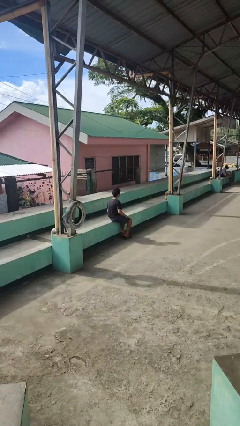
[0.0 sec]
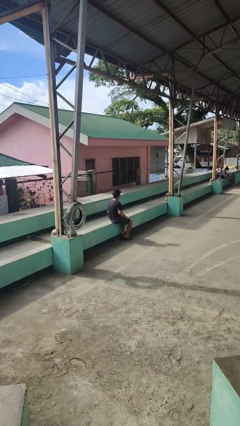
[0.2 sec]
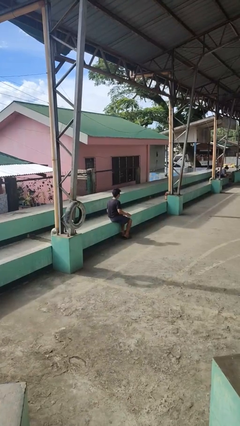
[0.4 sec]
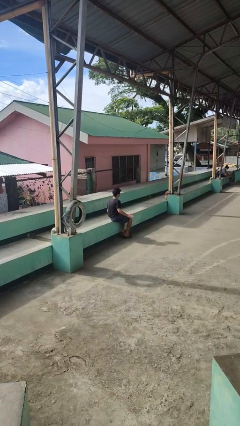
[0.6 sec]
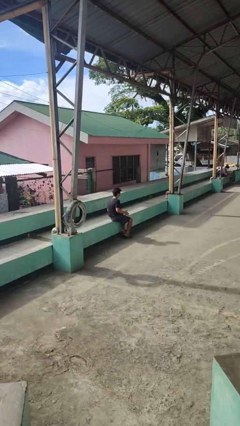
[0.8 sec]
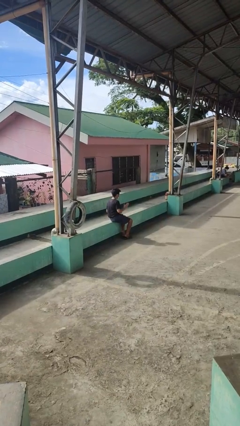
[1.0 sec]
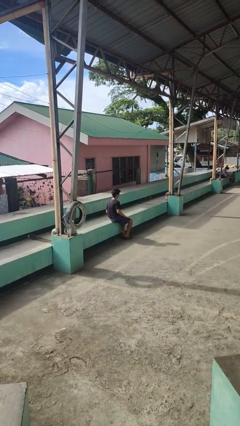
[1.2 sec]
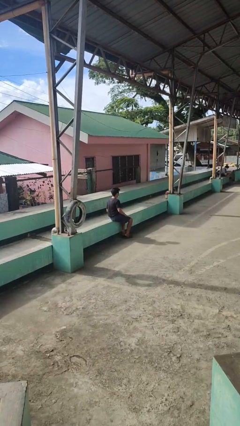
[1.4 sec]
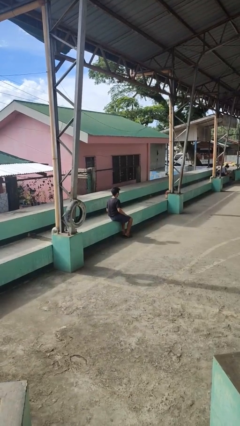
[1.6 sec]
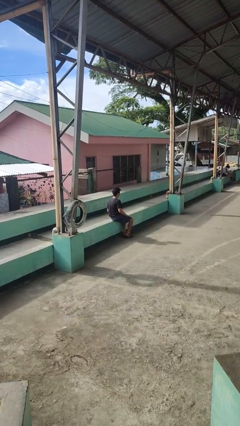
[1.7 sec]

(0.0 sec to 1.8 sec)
person slaps hands on thighs

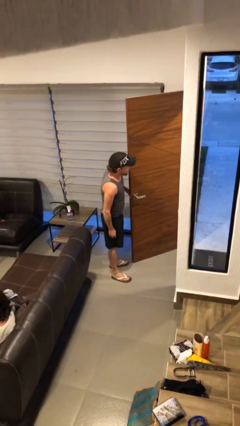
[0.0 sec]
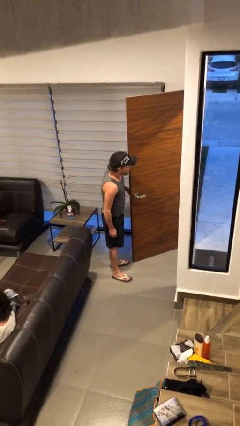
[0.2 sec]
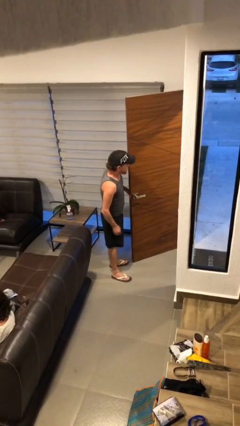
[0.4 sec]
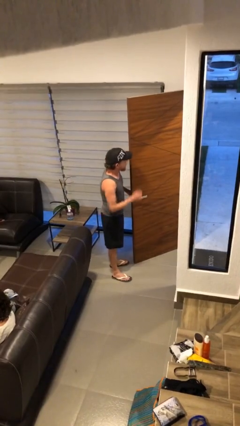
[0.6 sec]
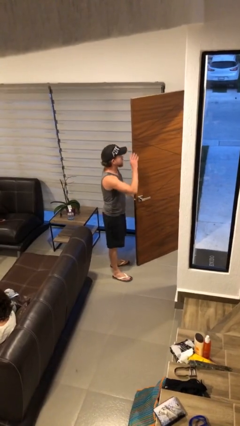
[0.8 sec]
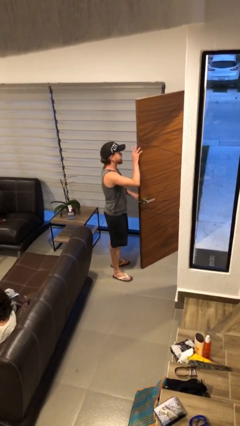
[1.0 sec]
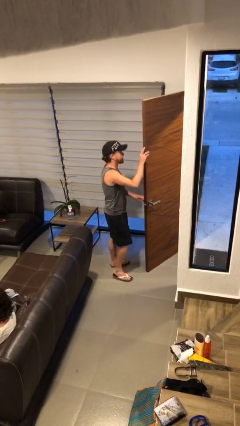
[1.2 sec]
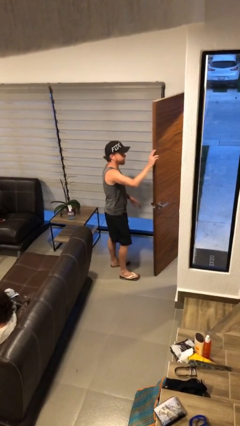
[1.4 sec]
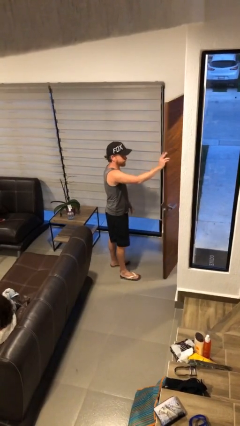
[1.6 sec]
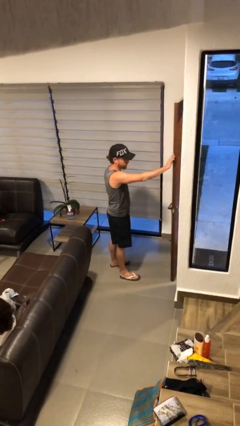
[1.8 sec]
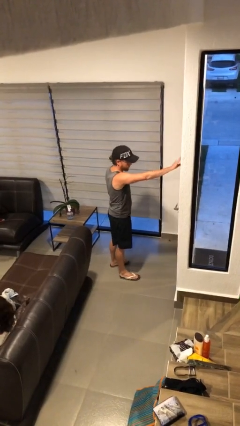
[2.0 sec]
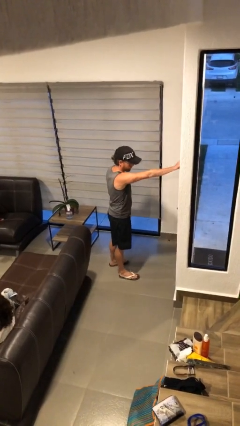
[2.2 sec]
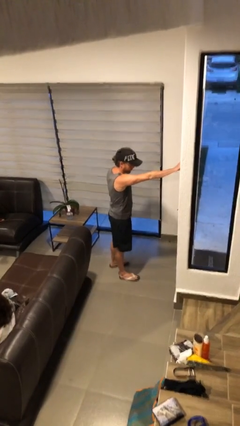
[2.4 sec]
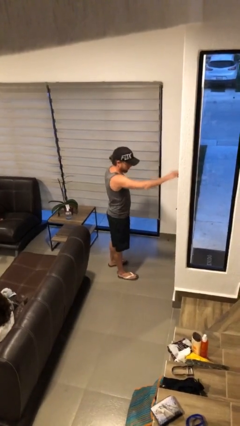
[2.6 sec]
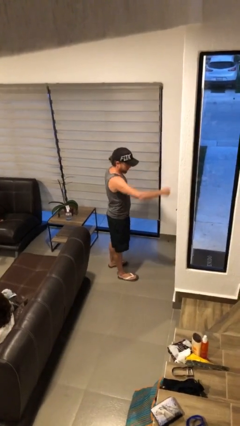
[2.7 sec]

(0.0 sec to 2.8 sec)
person closes facility door

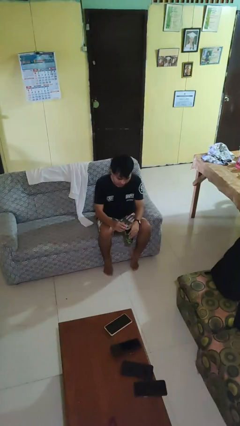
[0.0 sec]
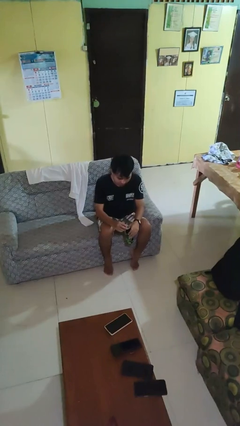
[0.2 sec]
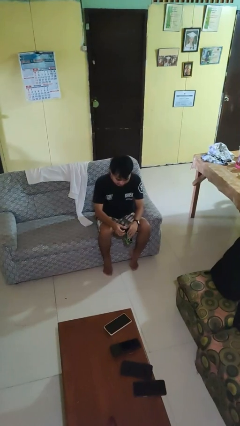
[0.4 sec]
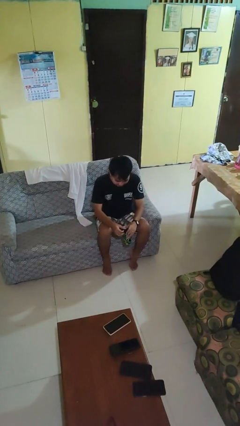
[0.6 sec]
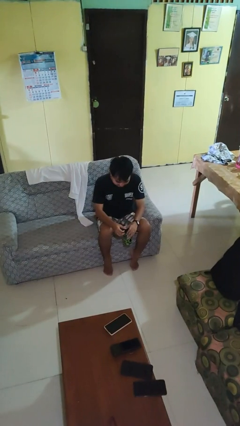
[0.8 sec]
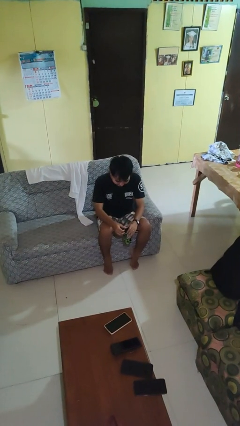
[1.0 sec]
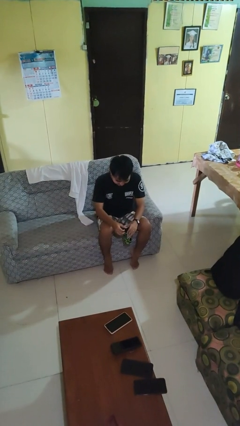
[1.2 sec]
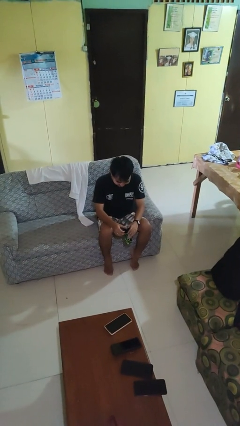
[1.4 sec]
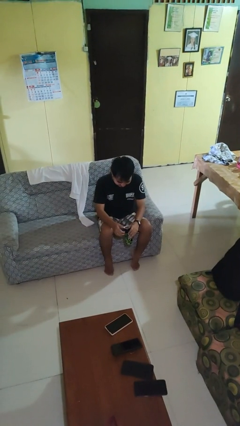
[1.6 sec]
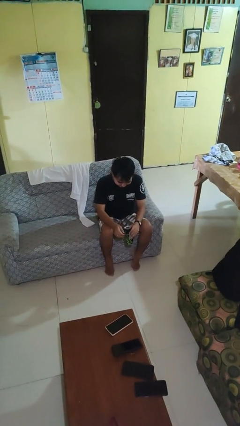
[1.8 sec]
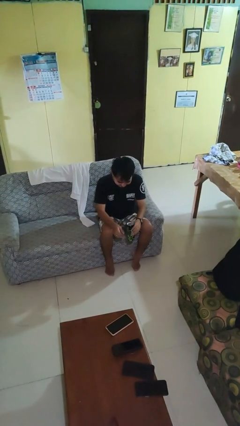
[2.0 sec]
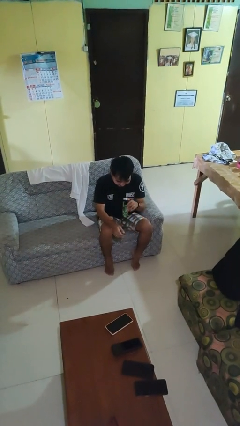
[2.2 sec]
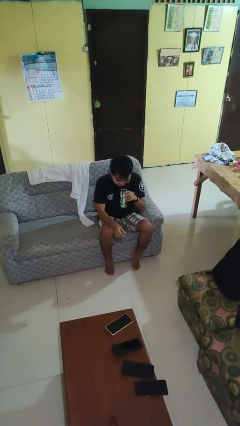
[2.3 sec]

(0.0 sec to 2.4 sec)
person opens beverage can

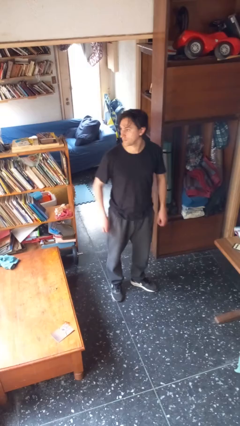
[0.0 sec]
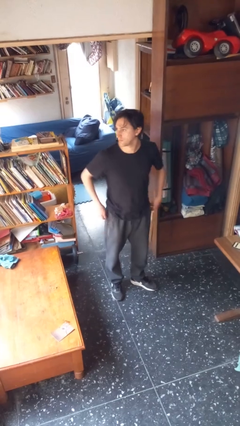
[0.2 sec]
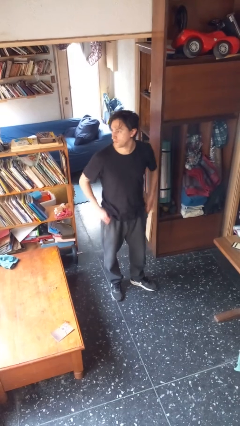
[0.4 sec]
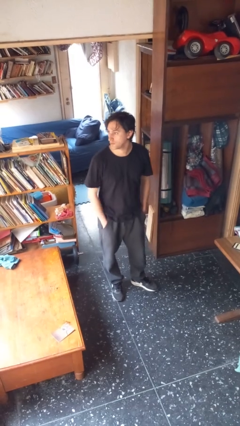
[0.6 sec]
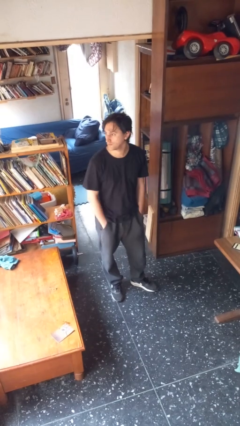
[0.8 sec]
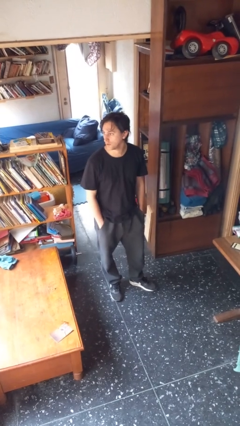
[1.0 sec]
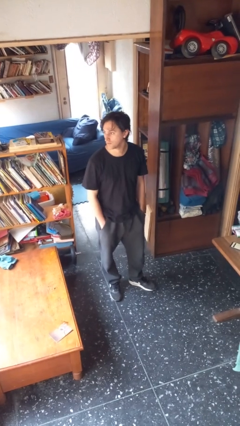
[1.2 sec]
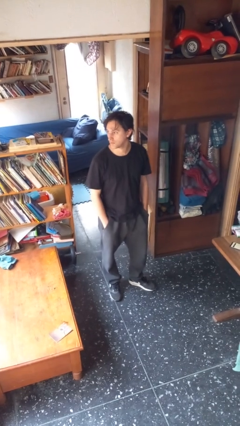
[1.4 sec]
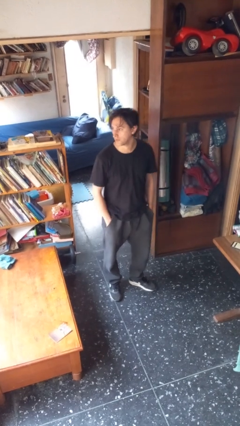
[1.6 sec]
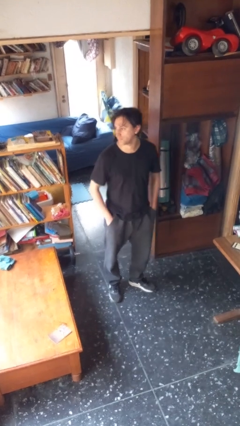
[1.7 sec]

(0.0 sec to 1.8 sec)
person puts hands in back pockets

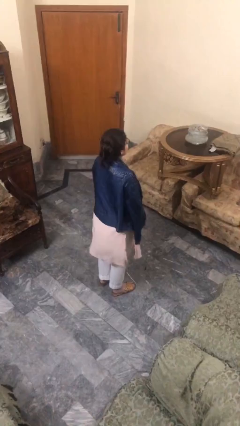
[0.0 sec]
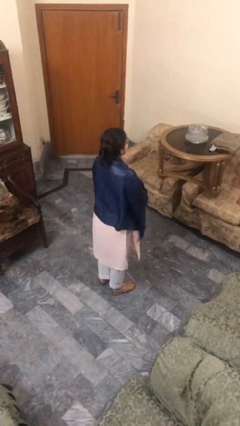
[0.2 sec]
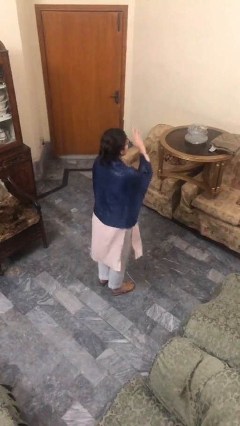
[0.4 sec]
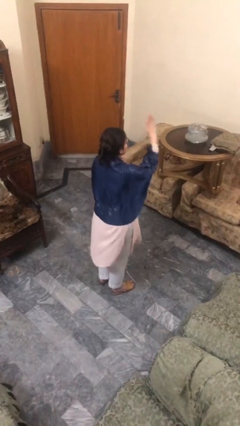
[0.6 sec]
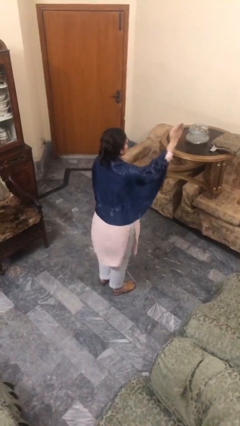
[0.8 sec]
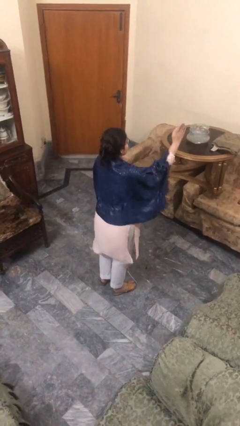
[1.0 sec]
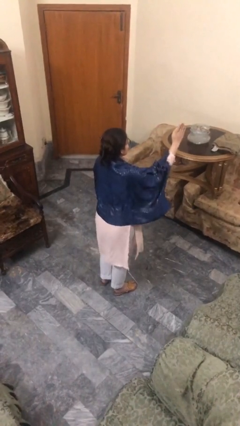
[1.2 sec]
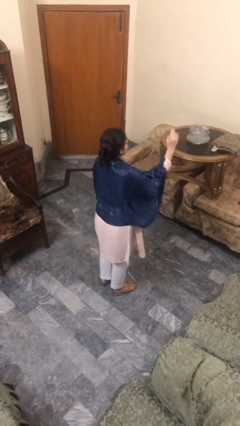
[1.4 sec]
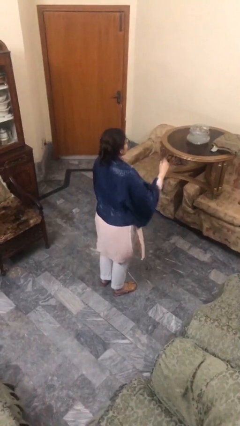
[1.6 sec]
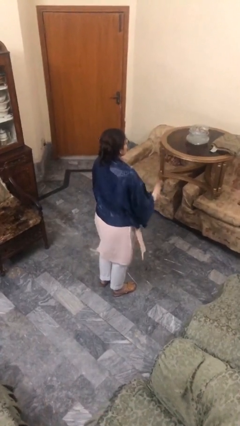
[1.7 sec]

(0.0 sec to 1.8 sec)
person gestures swipe right

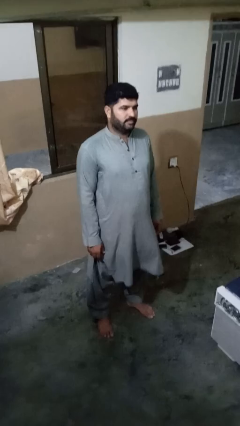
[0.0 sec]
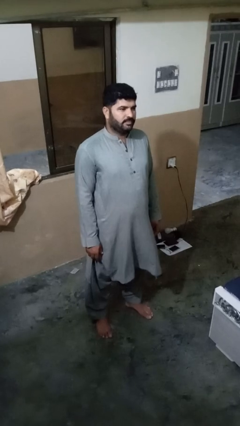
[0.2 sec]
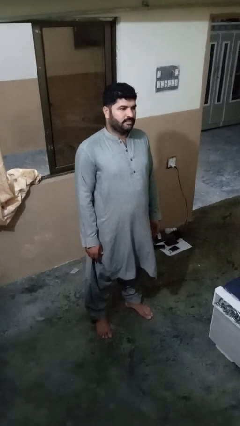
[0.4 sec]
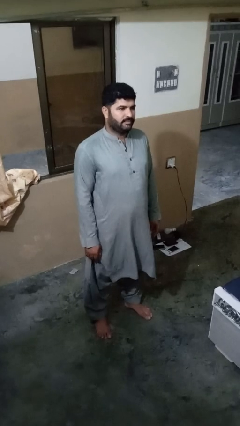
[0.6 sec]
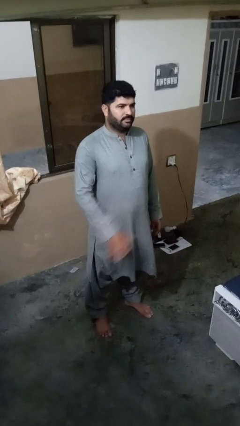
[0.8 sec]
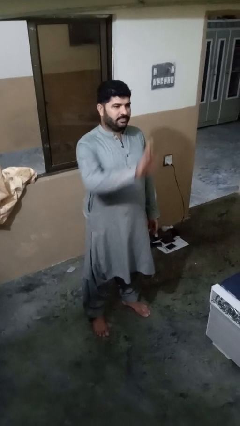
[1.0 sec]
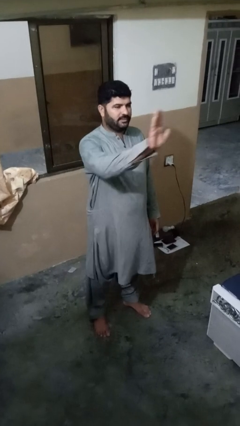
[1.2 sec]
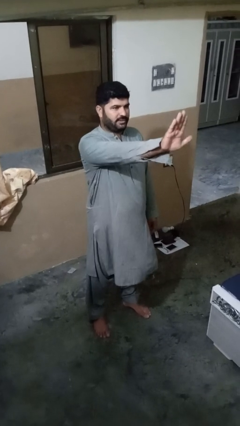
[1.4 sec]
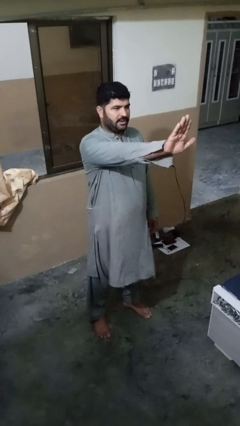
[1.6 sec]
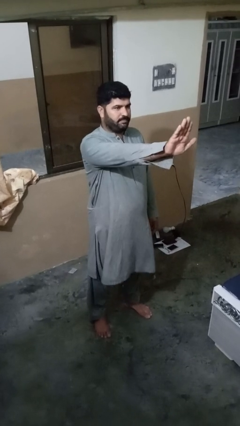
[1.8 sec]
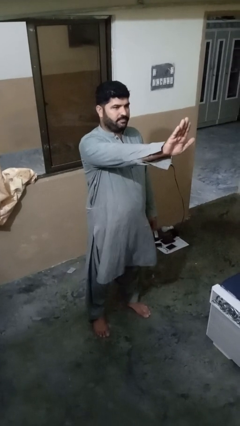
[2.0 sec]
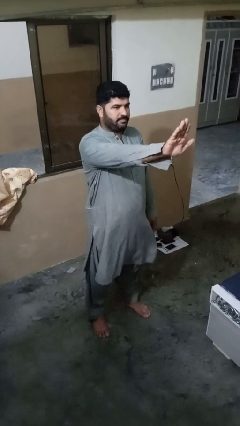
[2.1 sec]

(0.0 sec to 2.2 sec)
person gestures stop

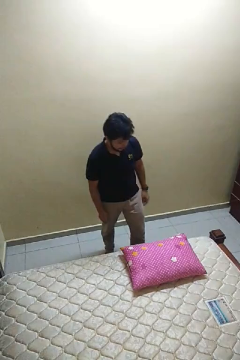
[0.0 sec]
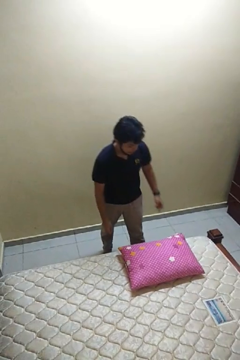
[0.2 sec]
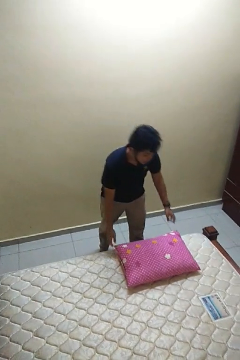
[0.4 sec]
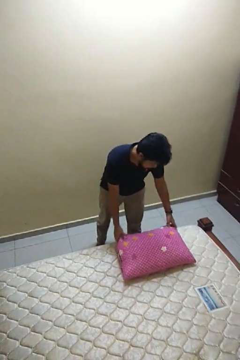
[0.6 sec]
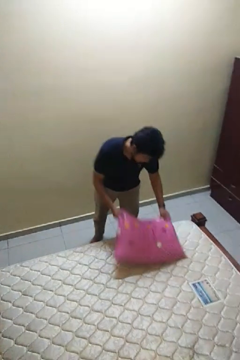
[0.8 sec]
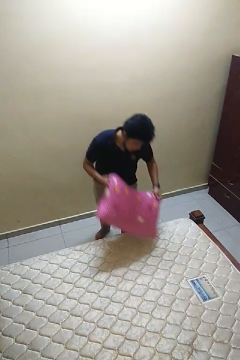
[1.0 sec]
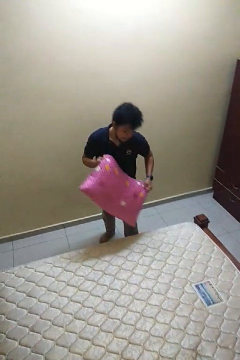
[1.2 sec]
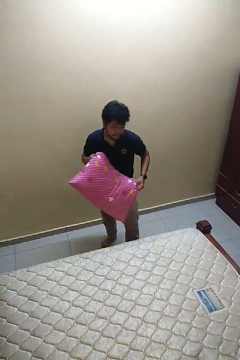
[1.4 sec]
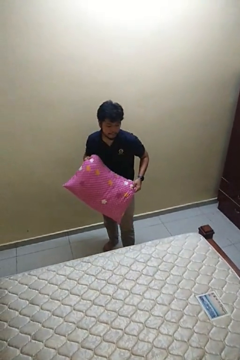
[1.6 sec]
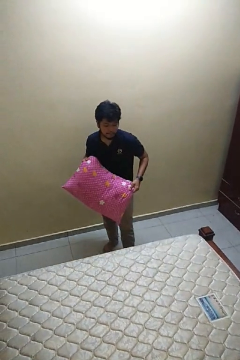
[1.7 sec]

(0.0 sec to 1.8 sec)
person picks up object from bed

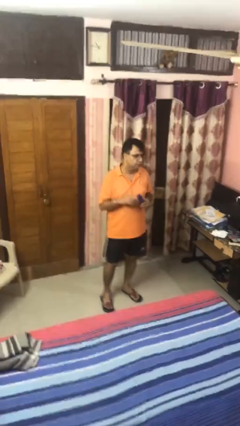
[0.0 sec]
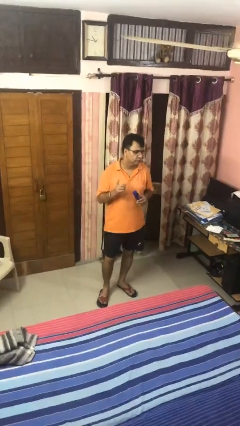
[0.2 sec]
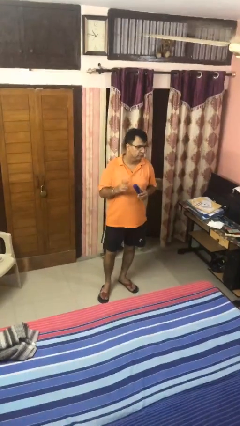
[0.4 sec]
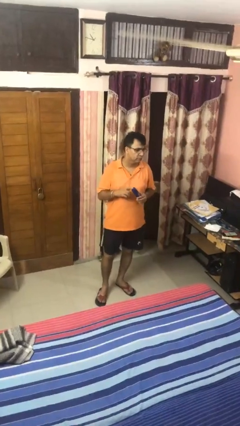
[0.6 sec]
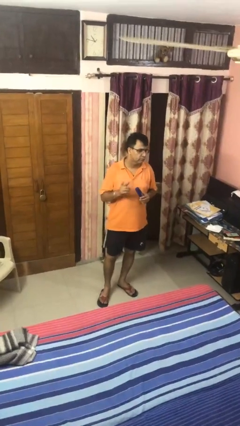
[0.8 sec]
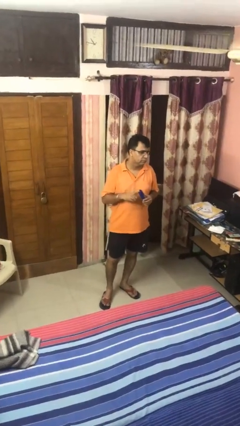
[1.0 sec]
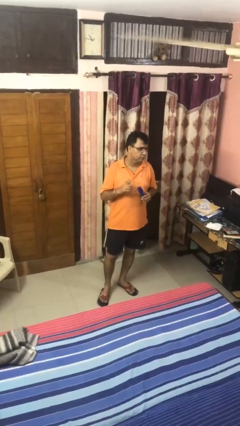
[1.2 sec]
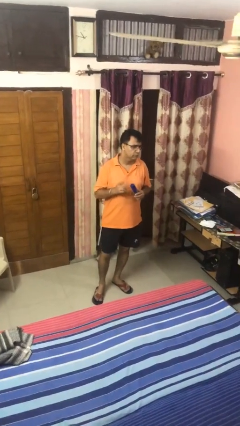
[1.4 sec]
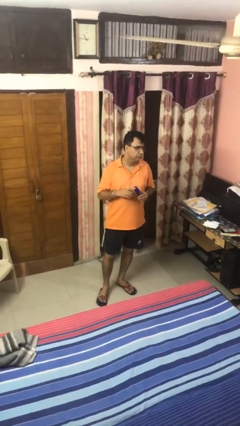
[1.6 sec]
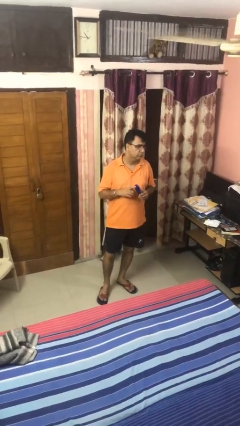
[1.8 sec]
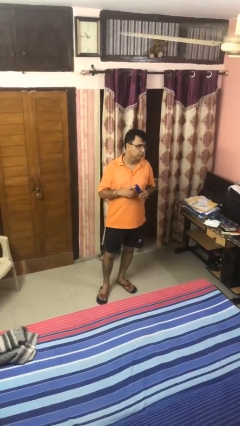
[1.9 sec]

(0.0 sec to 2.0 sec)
person taps object with finger

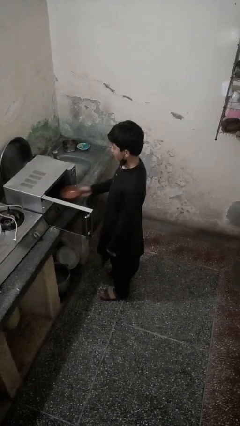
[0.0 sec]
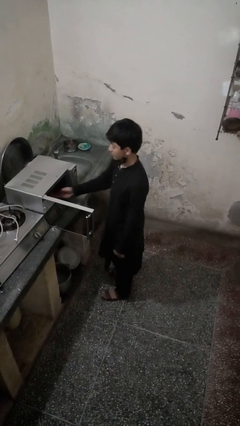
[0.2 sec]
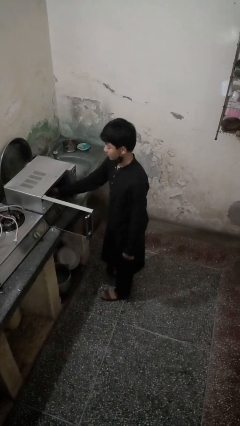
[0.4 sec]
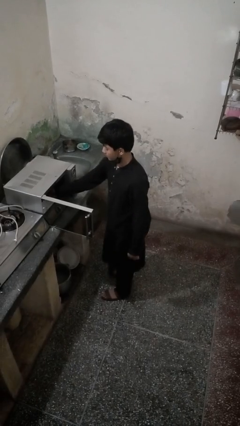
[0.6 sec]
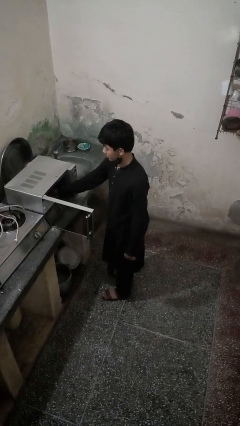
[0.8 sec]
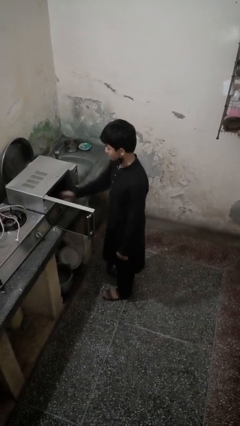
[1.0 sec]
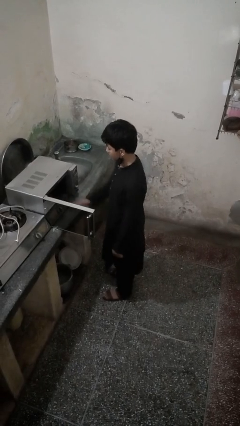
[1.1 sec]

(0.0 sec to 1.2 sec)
person puts object into microwave
